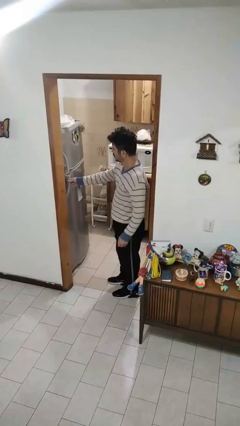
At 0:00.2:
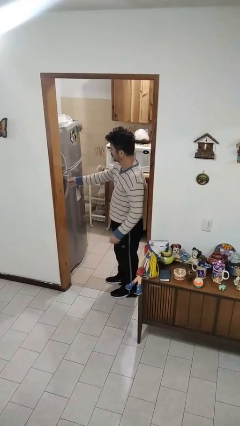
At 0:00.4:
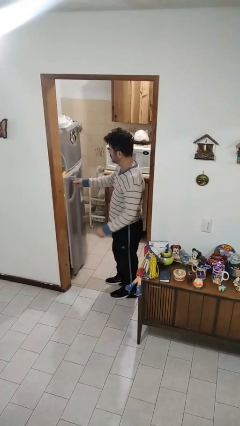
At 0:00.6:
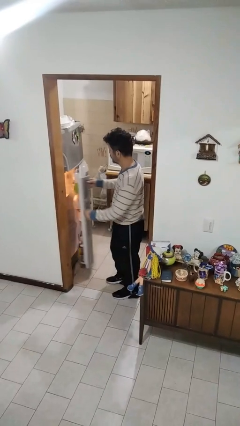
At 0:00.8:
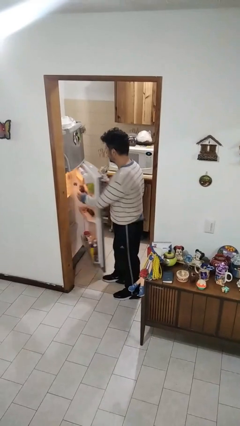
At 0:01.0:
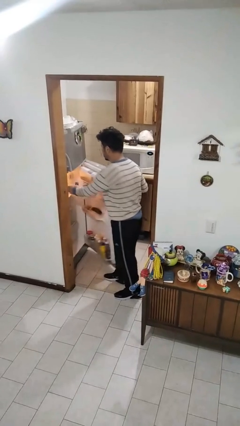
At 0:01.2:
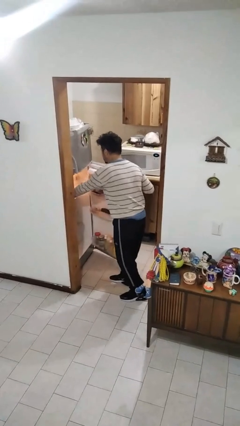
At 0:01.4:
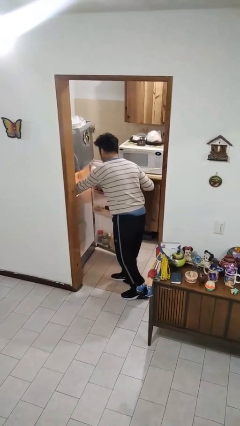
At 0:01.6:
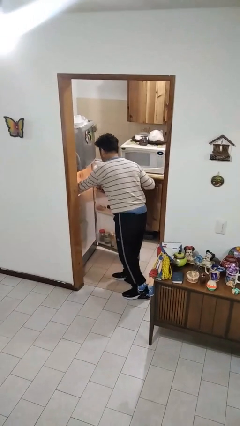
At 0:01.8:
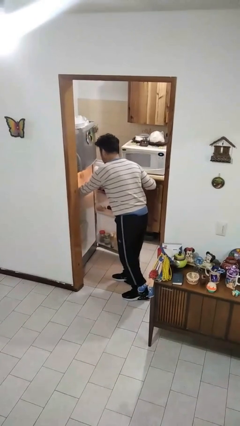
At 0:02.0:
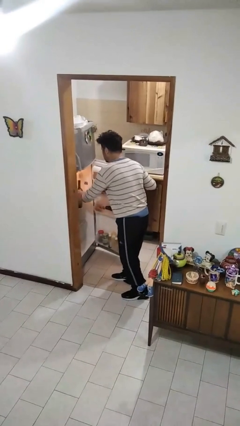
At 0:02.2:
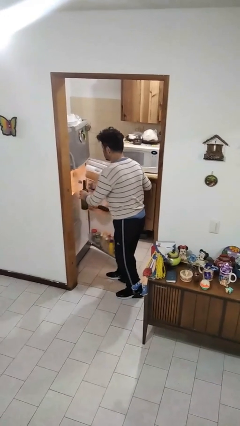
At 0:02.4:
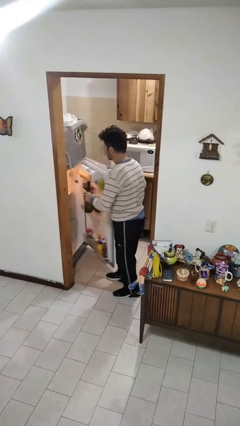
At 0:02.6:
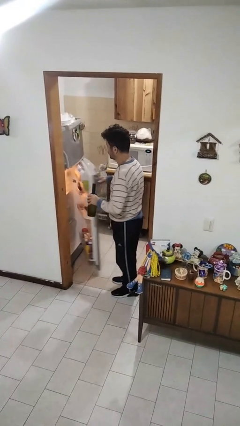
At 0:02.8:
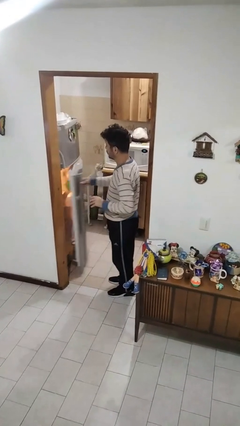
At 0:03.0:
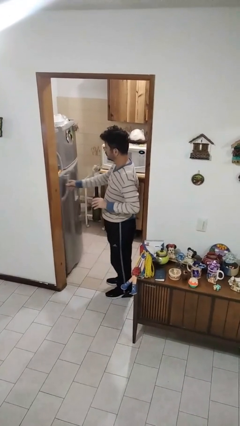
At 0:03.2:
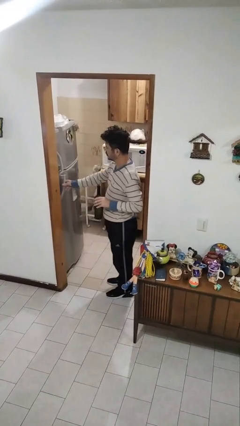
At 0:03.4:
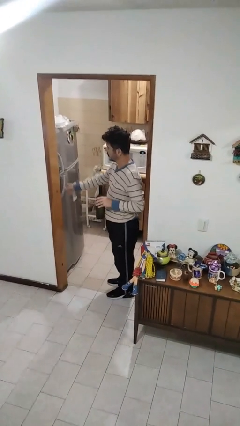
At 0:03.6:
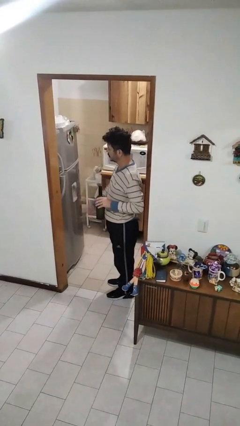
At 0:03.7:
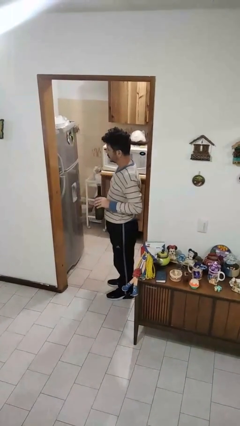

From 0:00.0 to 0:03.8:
person takes object from refrigerator

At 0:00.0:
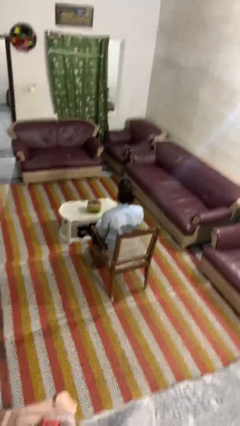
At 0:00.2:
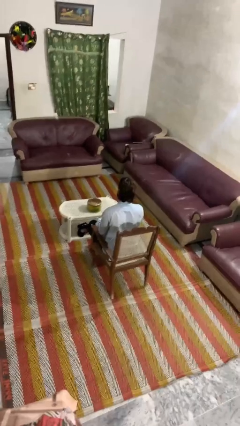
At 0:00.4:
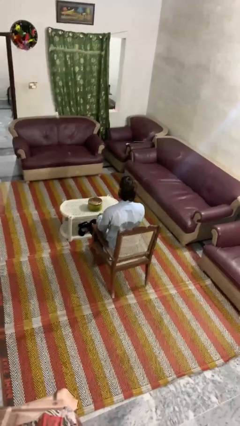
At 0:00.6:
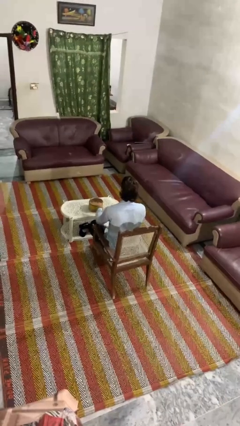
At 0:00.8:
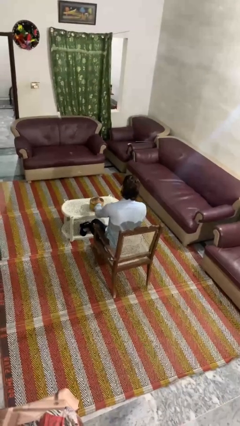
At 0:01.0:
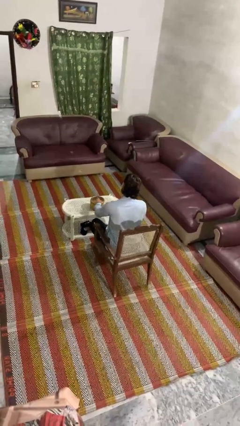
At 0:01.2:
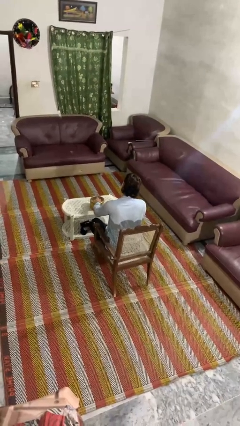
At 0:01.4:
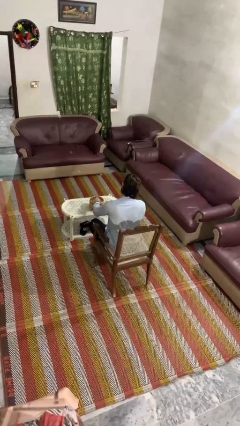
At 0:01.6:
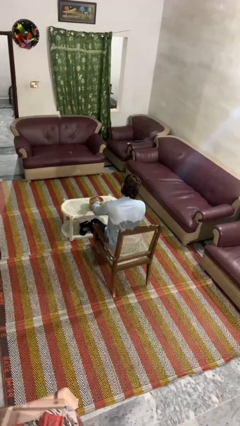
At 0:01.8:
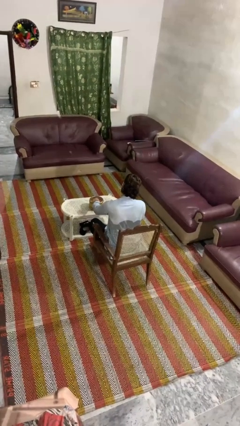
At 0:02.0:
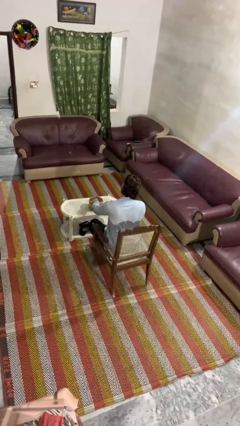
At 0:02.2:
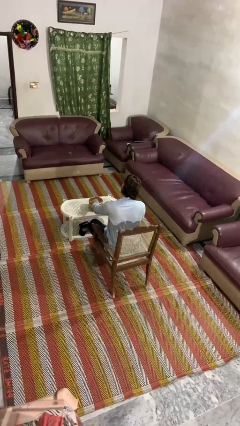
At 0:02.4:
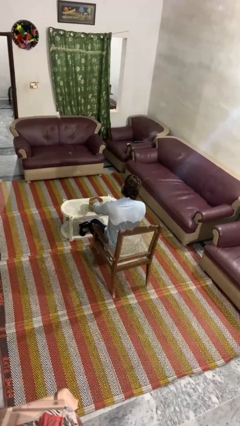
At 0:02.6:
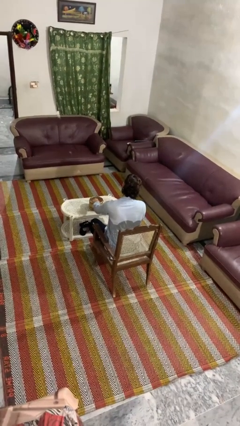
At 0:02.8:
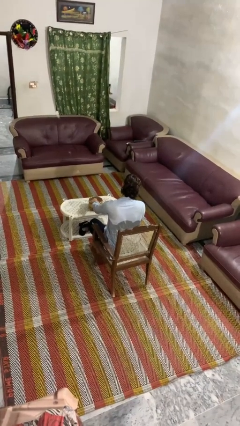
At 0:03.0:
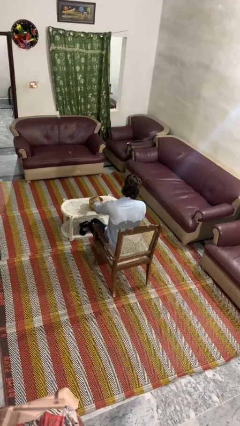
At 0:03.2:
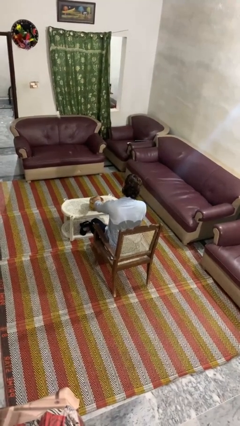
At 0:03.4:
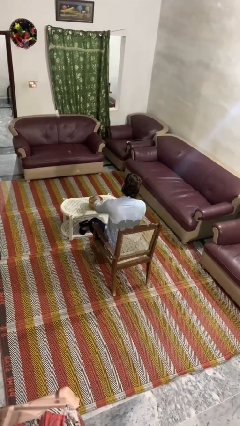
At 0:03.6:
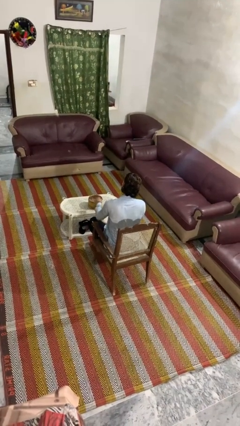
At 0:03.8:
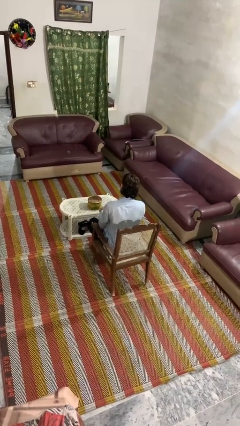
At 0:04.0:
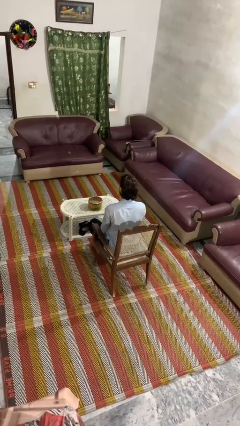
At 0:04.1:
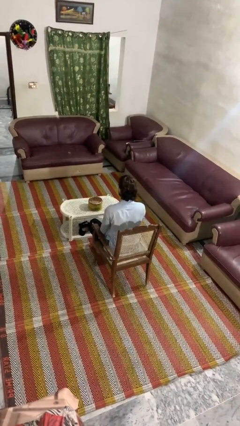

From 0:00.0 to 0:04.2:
person taps object with finger

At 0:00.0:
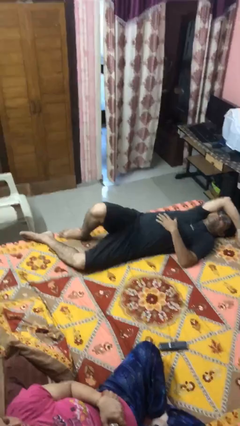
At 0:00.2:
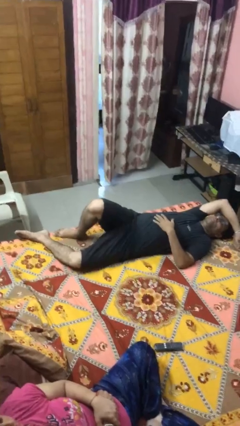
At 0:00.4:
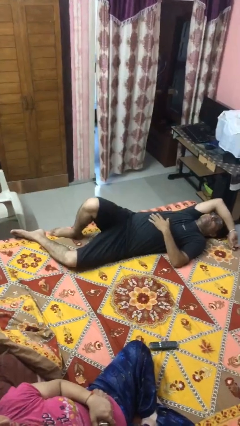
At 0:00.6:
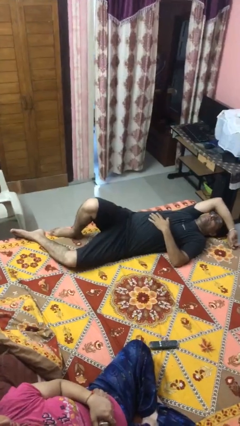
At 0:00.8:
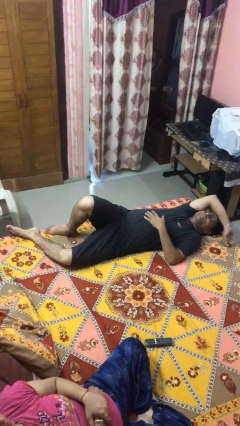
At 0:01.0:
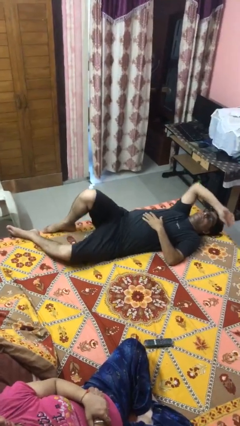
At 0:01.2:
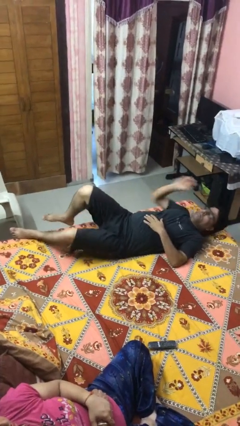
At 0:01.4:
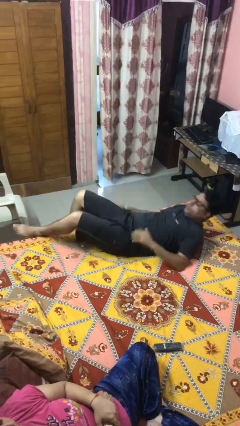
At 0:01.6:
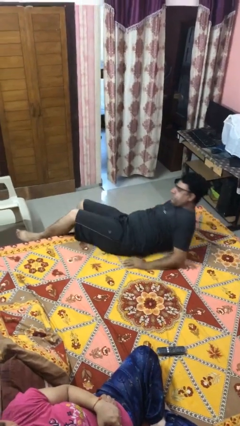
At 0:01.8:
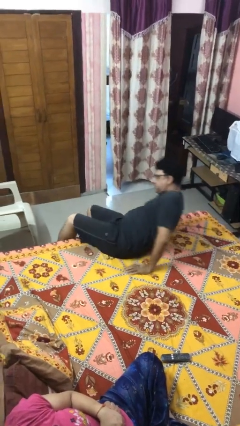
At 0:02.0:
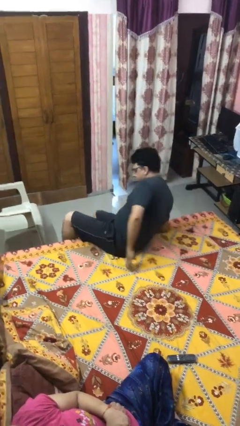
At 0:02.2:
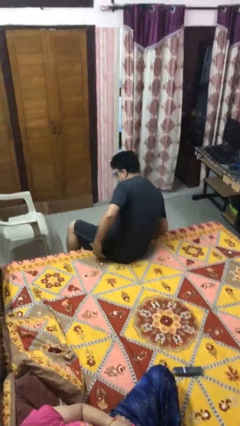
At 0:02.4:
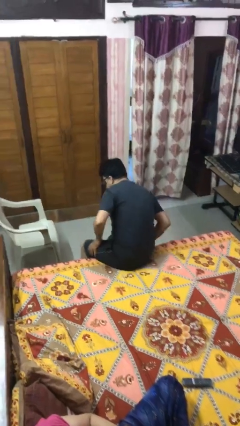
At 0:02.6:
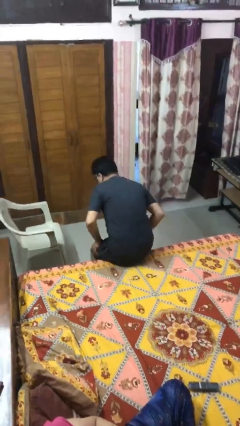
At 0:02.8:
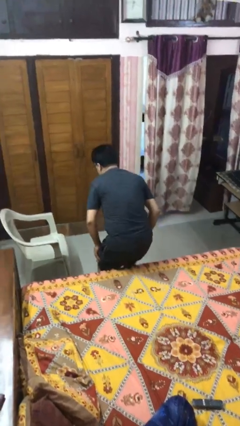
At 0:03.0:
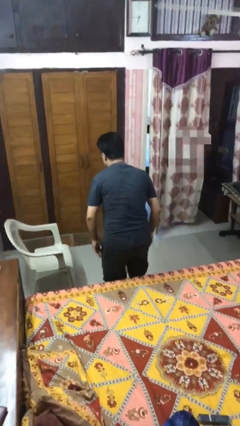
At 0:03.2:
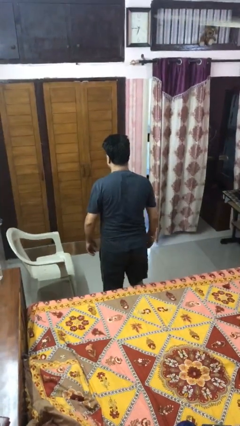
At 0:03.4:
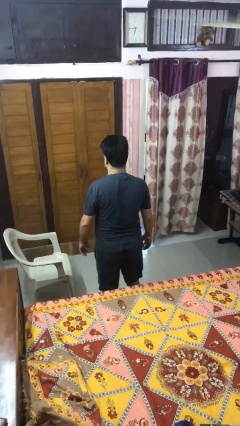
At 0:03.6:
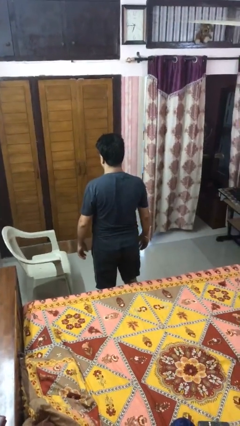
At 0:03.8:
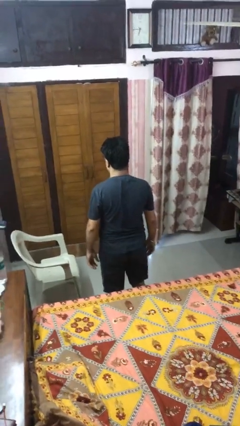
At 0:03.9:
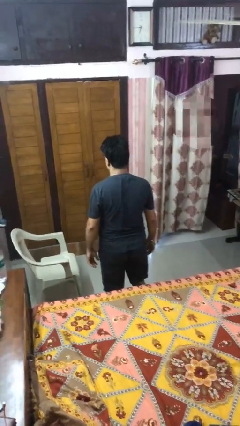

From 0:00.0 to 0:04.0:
person stands up

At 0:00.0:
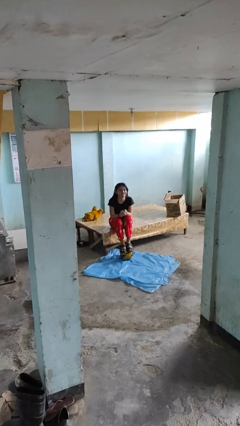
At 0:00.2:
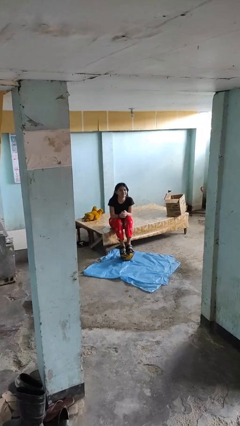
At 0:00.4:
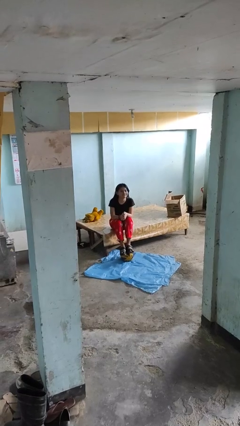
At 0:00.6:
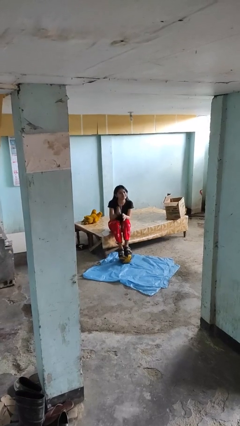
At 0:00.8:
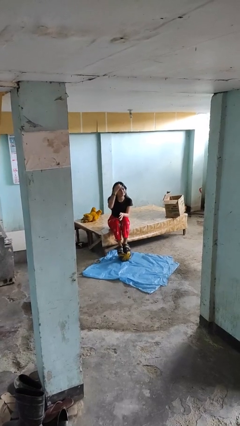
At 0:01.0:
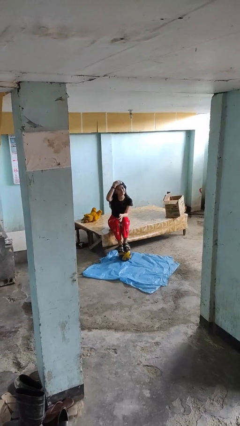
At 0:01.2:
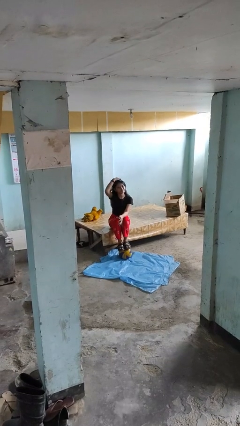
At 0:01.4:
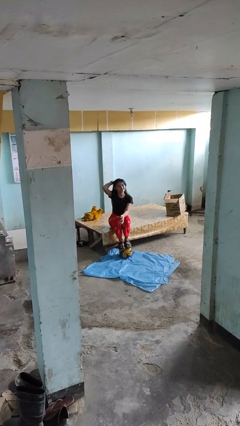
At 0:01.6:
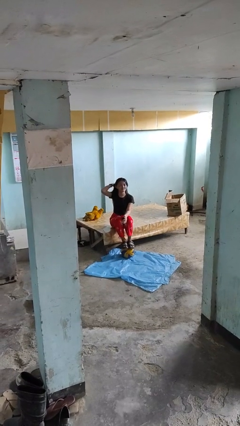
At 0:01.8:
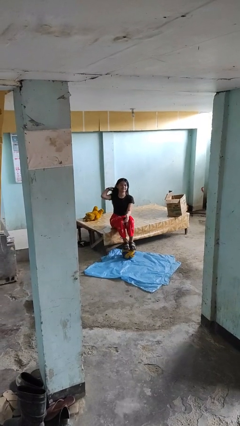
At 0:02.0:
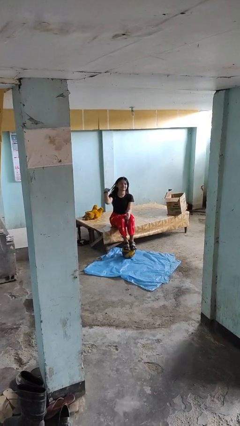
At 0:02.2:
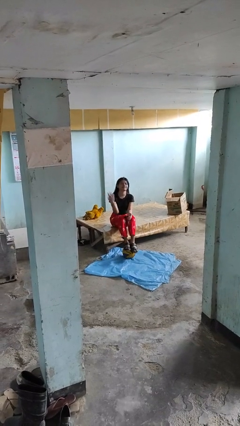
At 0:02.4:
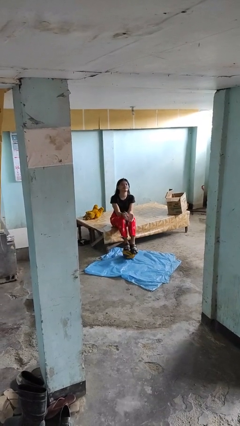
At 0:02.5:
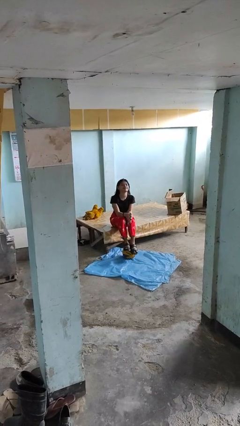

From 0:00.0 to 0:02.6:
person strokes hair

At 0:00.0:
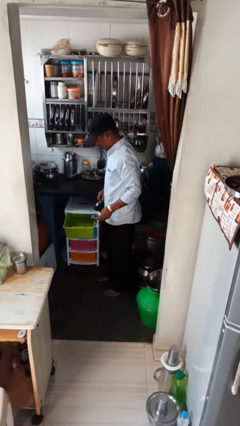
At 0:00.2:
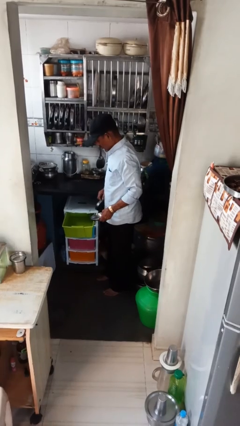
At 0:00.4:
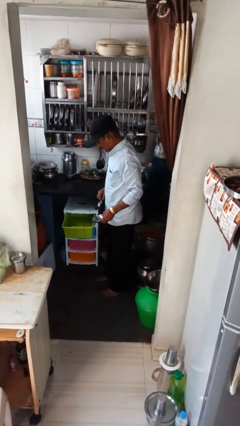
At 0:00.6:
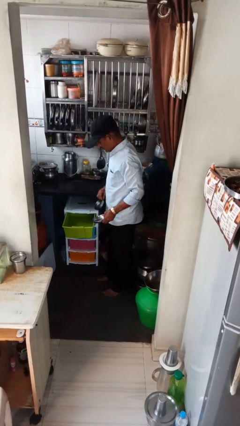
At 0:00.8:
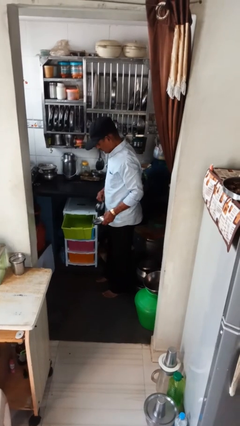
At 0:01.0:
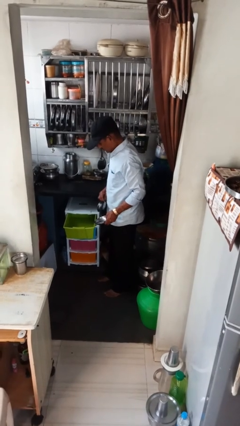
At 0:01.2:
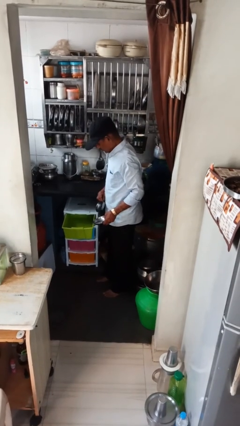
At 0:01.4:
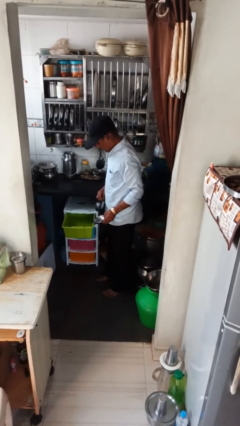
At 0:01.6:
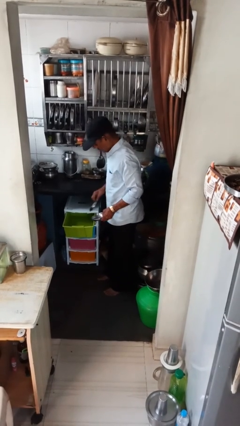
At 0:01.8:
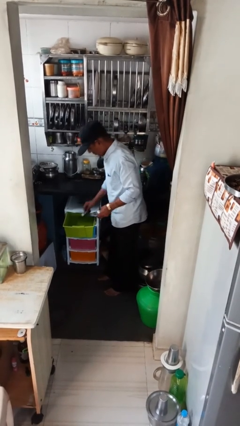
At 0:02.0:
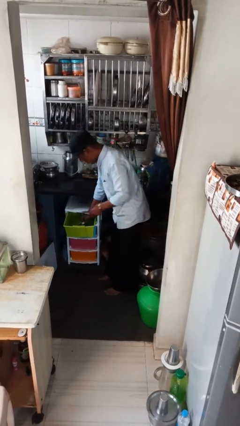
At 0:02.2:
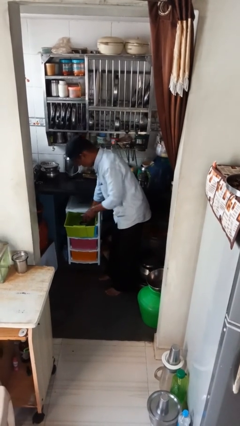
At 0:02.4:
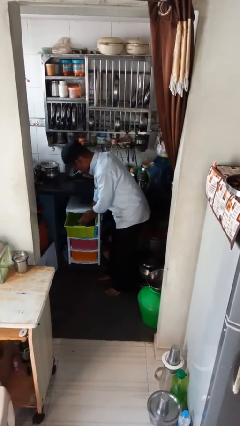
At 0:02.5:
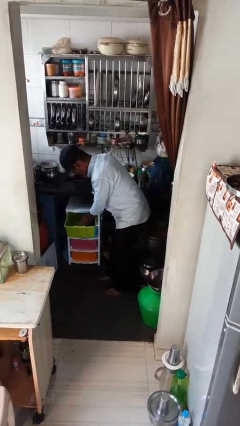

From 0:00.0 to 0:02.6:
person puts object in cabinet

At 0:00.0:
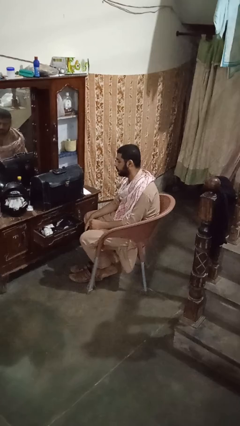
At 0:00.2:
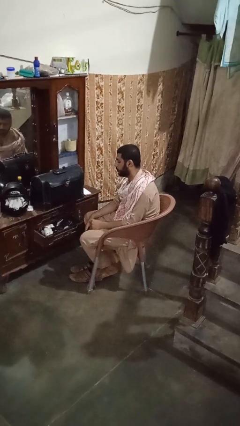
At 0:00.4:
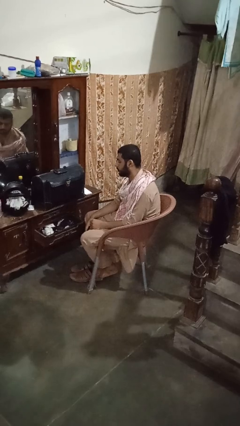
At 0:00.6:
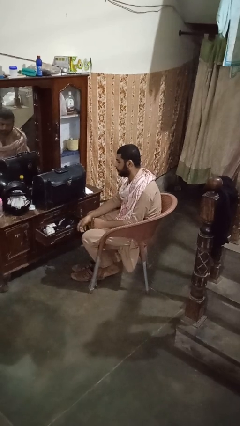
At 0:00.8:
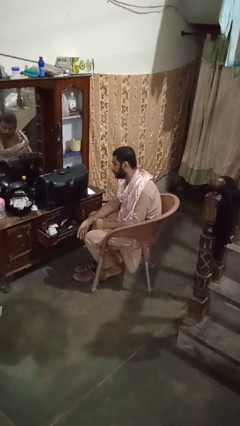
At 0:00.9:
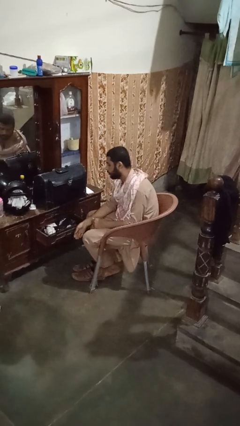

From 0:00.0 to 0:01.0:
person closes dresser drawer
